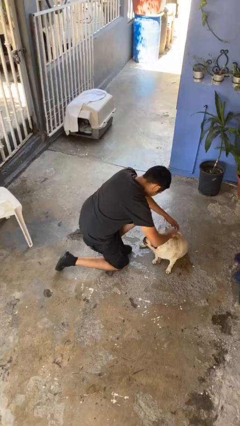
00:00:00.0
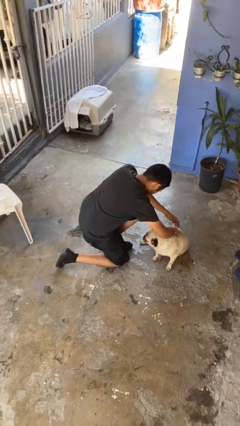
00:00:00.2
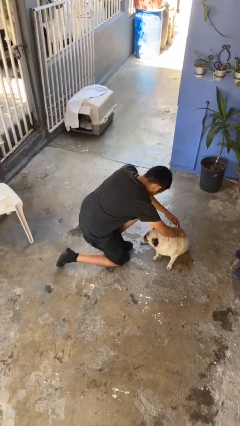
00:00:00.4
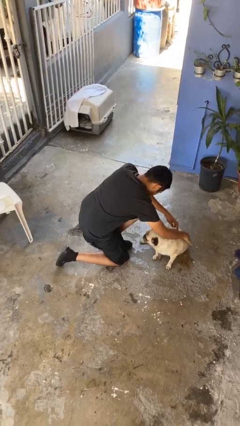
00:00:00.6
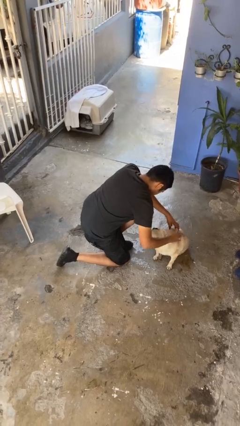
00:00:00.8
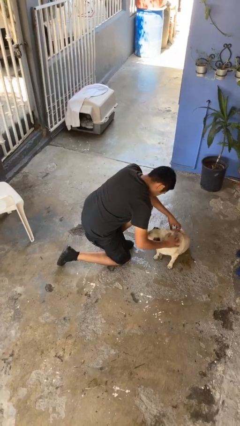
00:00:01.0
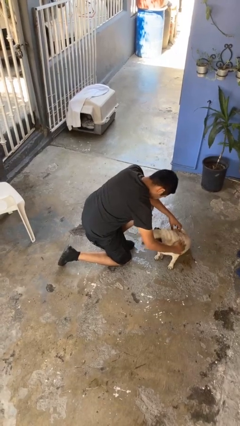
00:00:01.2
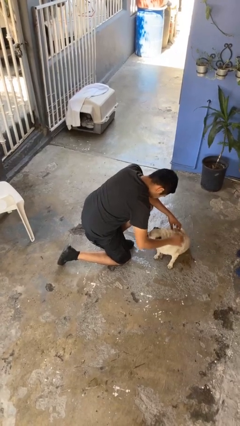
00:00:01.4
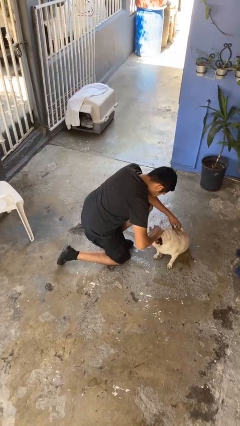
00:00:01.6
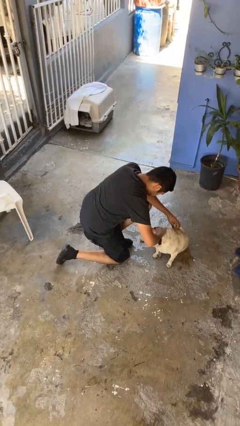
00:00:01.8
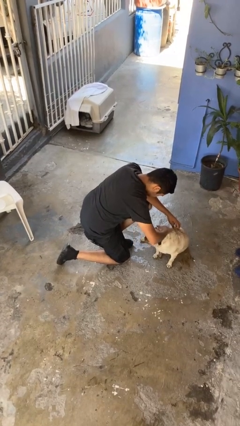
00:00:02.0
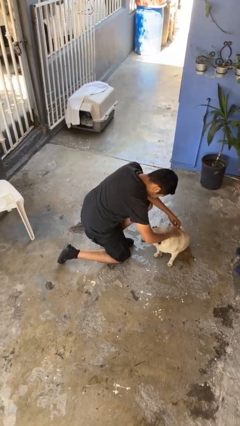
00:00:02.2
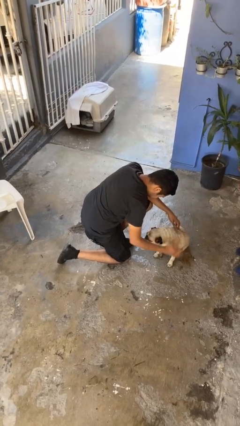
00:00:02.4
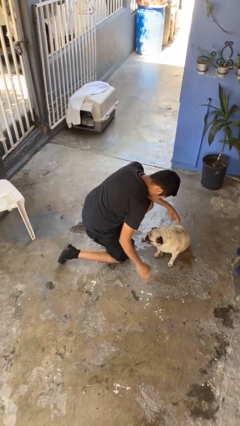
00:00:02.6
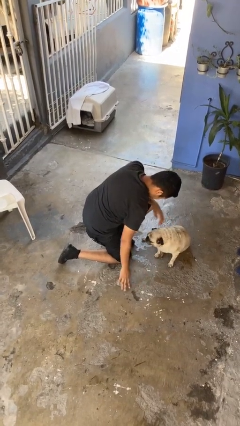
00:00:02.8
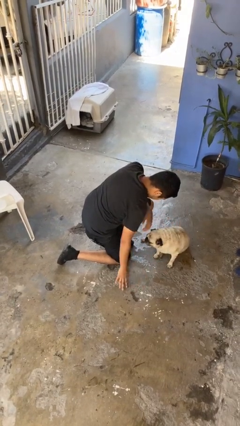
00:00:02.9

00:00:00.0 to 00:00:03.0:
person pets dog

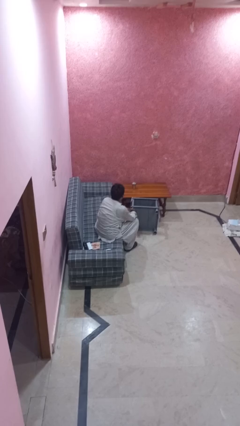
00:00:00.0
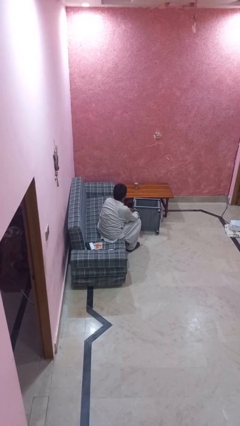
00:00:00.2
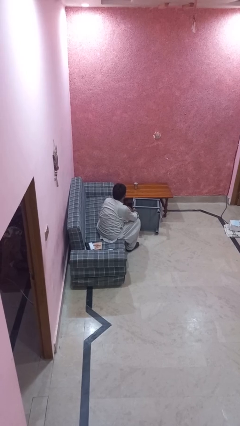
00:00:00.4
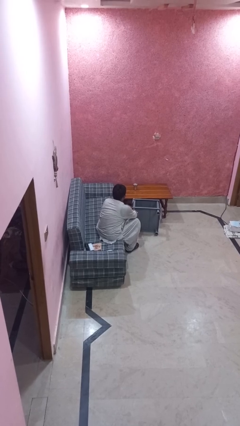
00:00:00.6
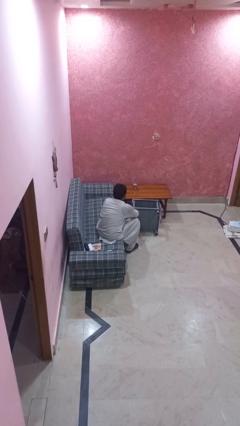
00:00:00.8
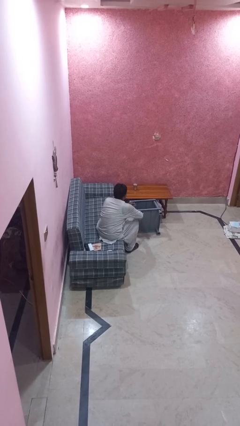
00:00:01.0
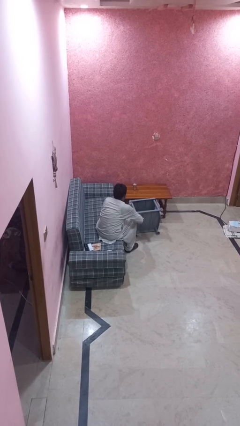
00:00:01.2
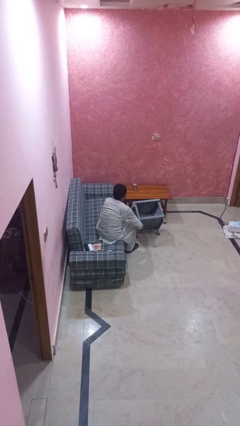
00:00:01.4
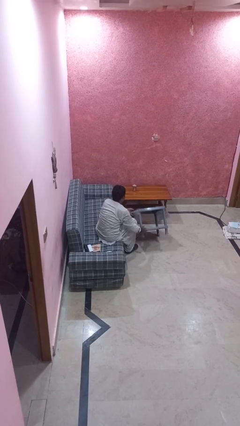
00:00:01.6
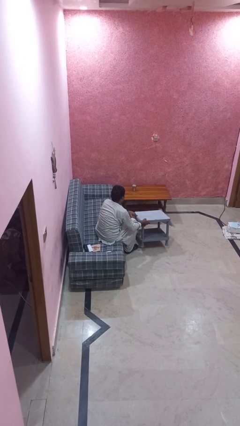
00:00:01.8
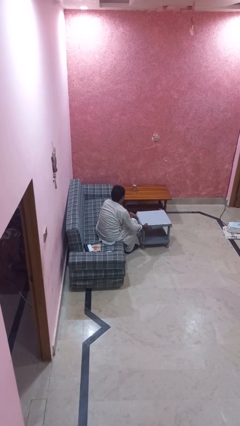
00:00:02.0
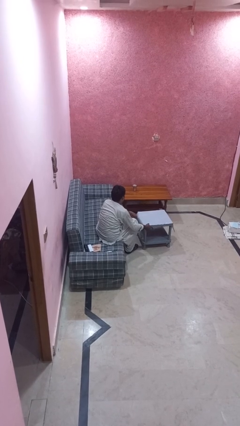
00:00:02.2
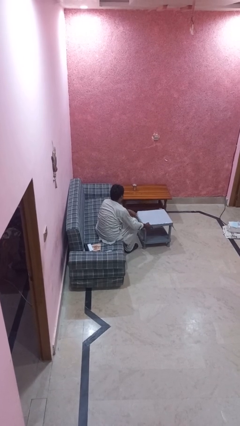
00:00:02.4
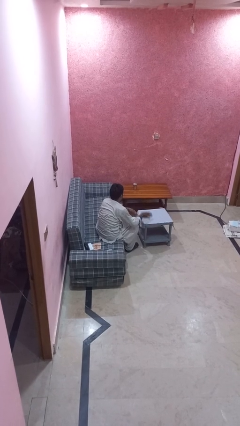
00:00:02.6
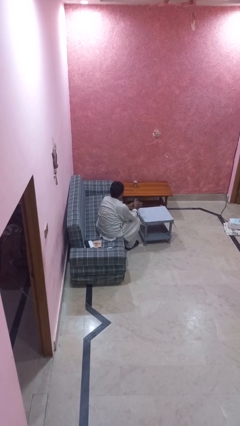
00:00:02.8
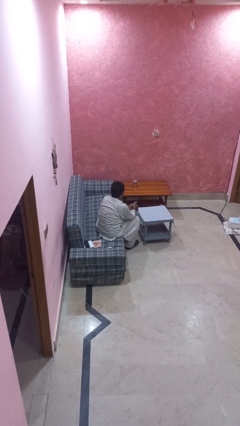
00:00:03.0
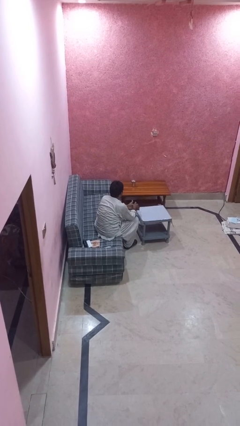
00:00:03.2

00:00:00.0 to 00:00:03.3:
person sets upright furniture

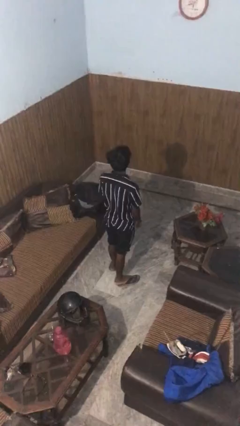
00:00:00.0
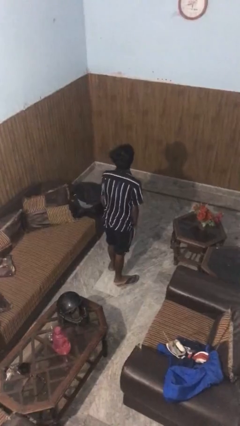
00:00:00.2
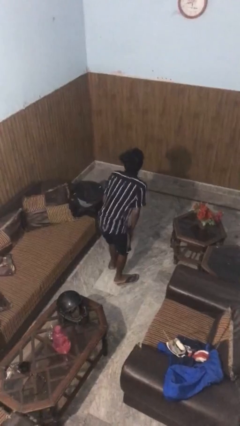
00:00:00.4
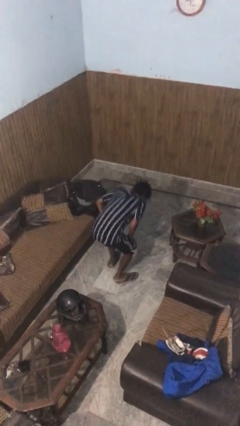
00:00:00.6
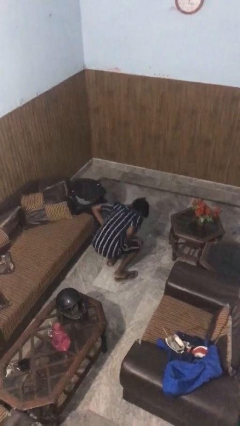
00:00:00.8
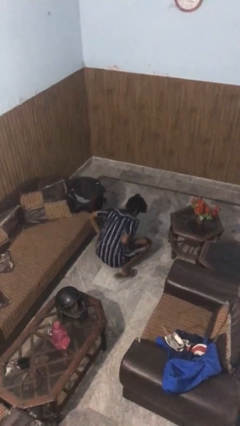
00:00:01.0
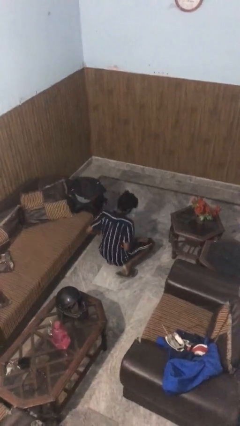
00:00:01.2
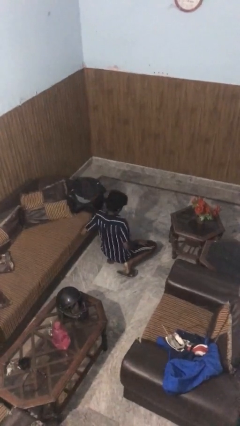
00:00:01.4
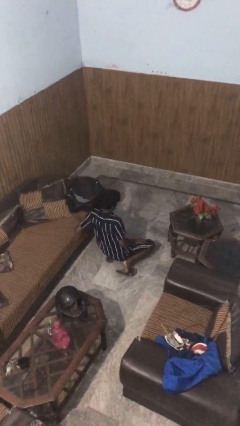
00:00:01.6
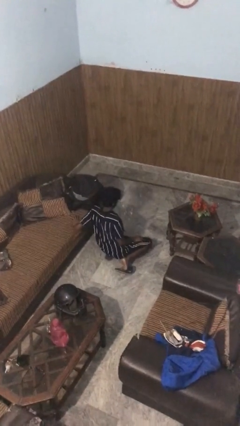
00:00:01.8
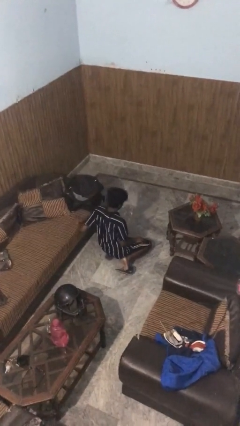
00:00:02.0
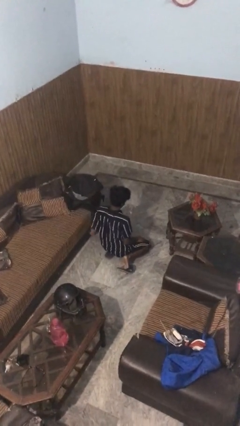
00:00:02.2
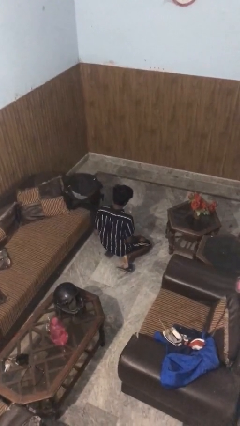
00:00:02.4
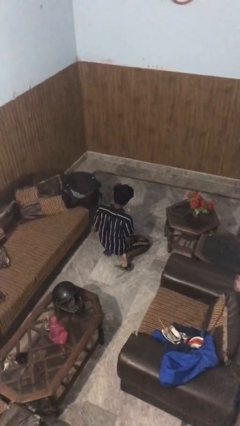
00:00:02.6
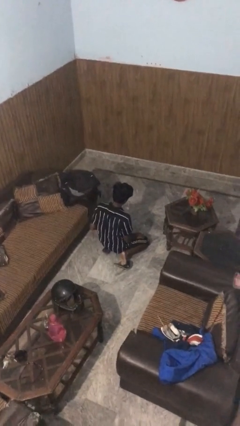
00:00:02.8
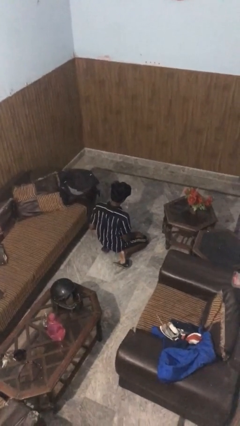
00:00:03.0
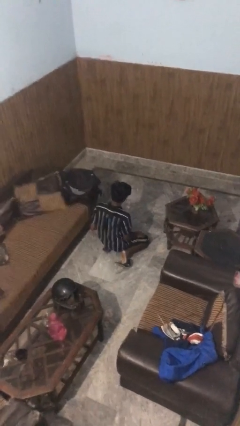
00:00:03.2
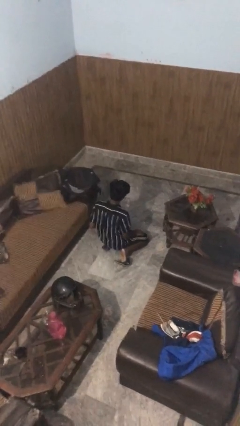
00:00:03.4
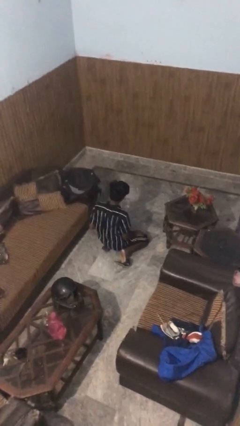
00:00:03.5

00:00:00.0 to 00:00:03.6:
person kneels

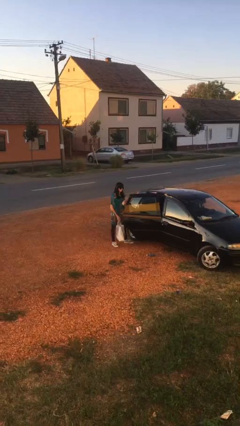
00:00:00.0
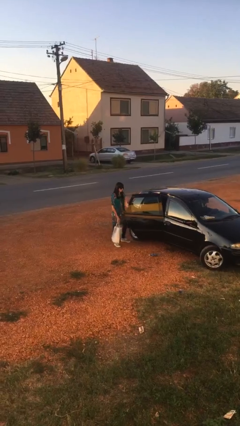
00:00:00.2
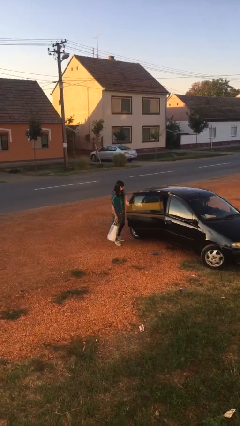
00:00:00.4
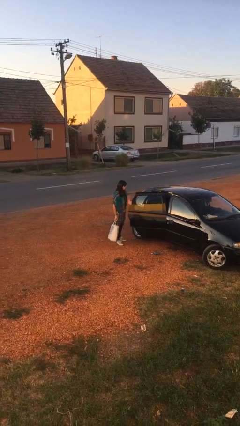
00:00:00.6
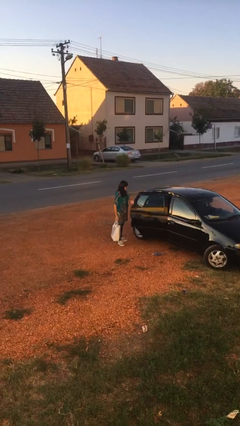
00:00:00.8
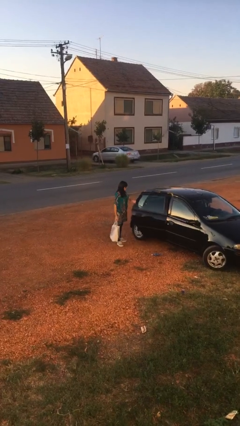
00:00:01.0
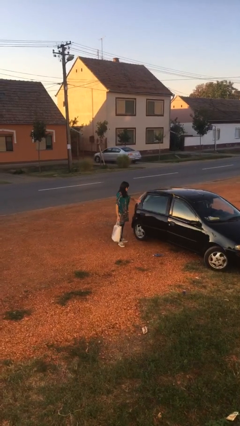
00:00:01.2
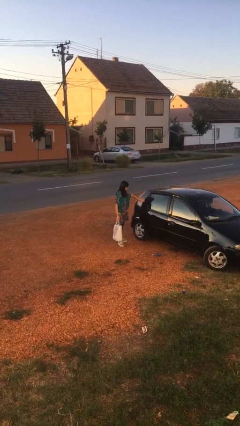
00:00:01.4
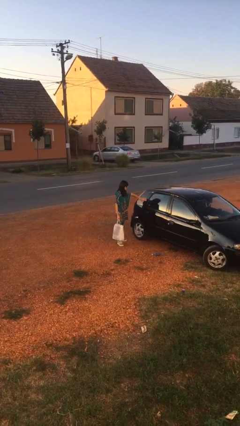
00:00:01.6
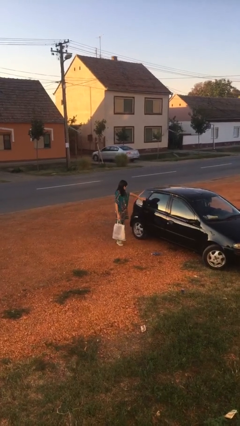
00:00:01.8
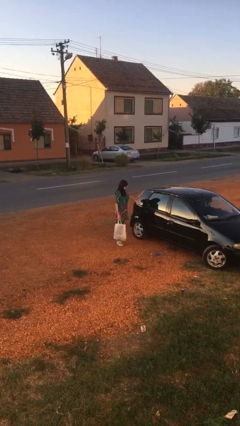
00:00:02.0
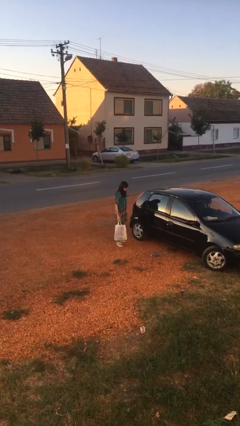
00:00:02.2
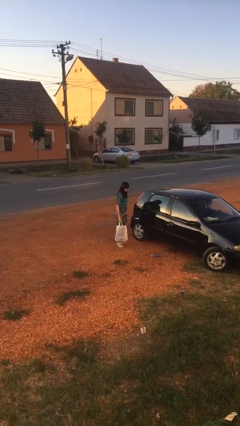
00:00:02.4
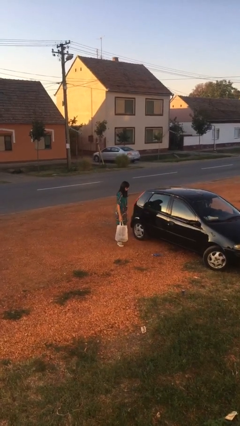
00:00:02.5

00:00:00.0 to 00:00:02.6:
person closes car door

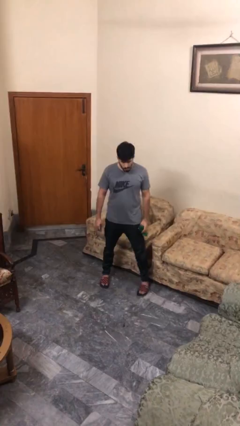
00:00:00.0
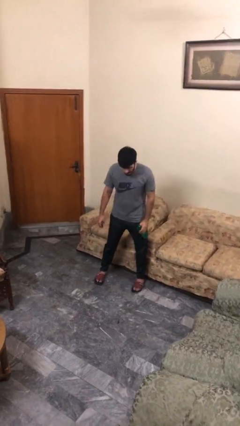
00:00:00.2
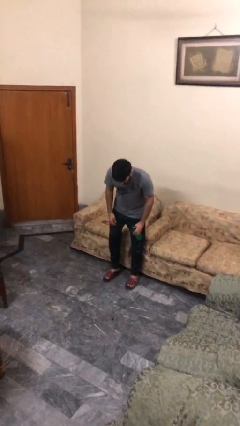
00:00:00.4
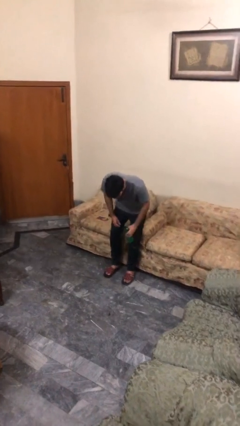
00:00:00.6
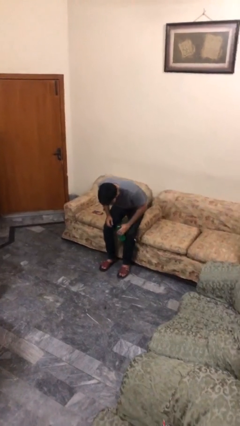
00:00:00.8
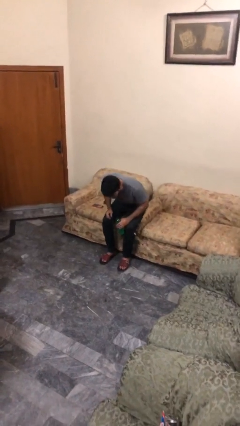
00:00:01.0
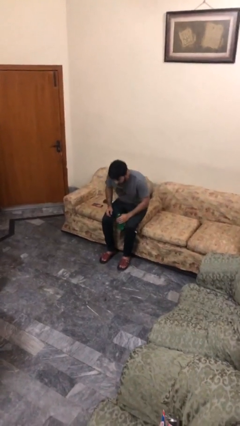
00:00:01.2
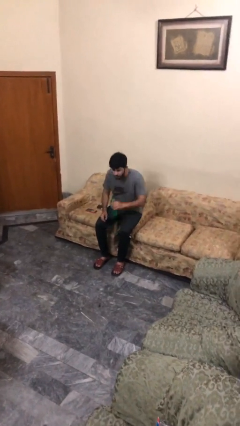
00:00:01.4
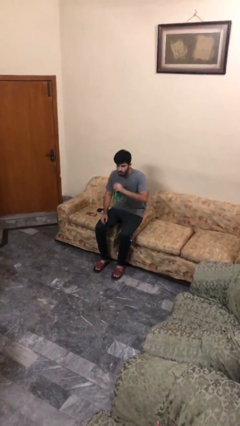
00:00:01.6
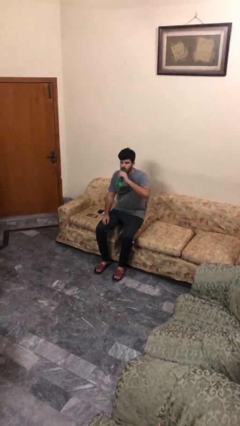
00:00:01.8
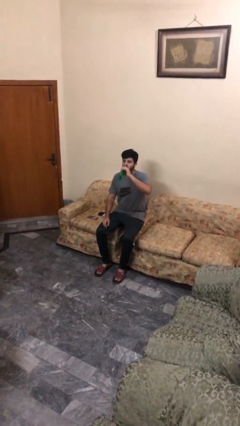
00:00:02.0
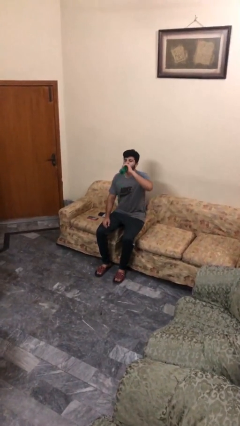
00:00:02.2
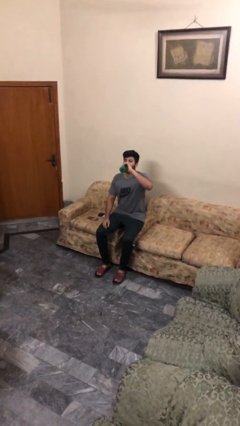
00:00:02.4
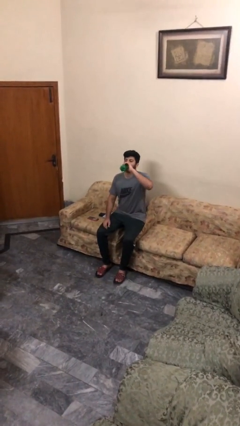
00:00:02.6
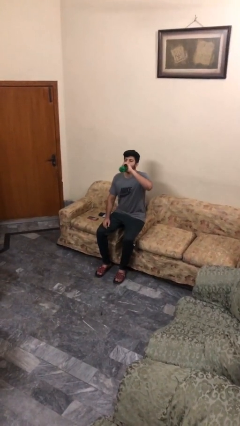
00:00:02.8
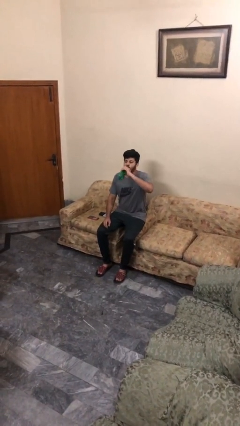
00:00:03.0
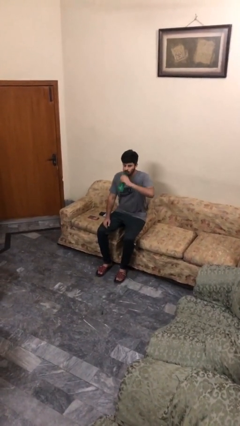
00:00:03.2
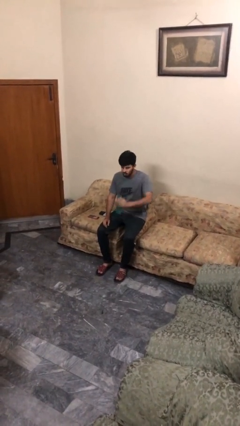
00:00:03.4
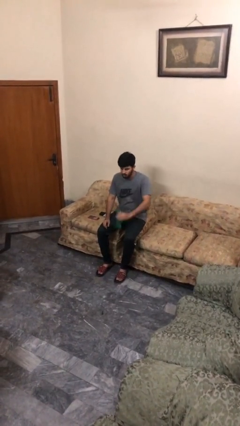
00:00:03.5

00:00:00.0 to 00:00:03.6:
person drinks from bottle

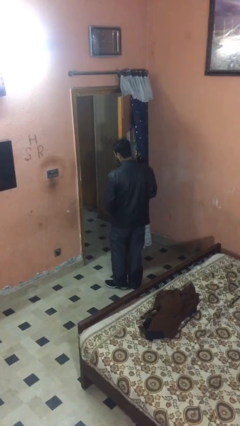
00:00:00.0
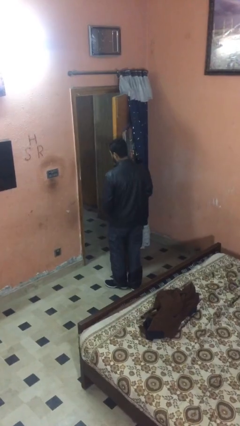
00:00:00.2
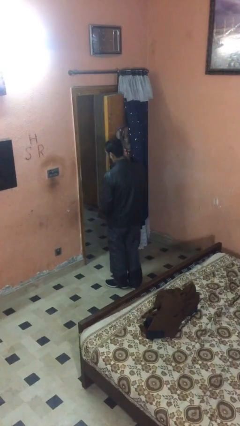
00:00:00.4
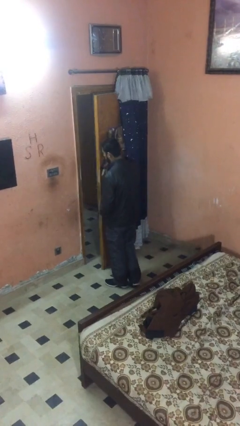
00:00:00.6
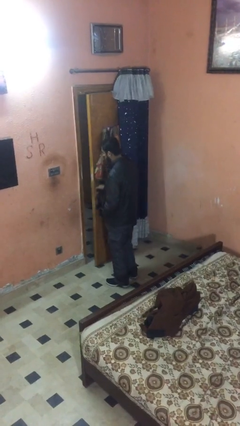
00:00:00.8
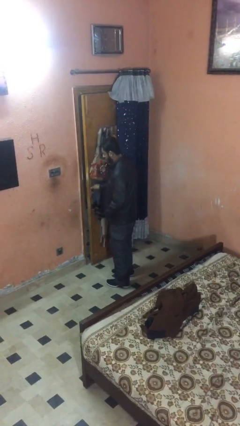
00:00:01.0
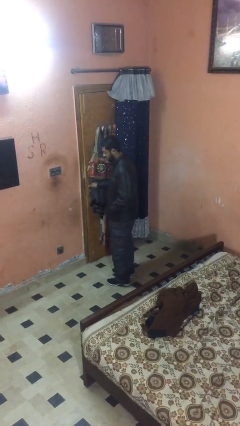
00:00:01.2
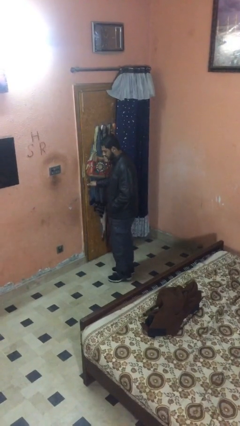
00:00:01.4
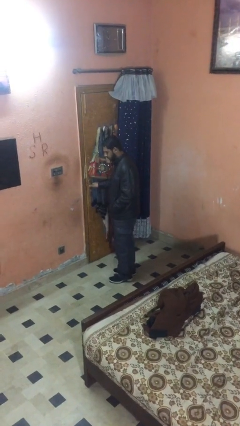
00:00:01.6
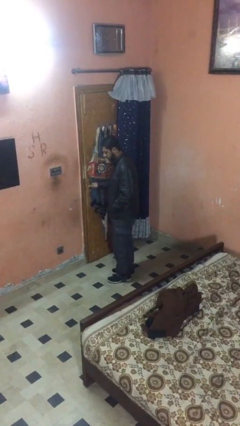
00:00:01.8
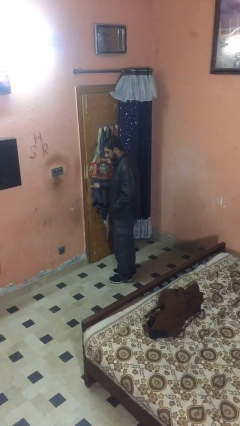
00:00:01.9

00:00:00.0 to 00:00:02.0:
person closes facility door
